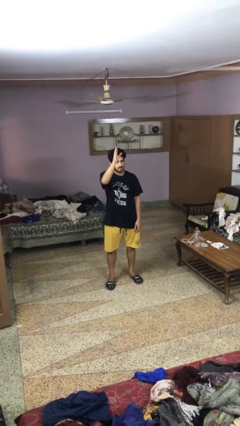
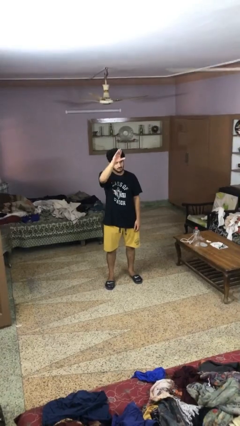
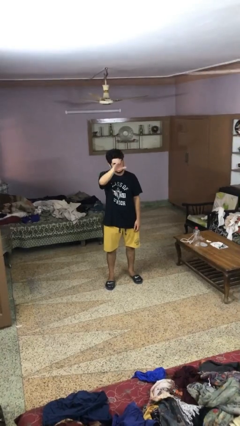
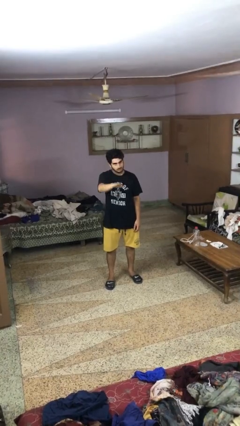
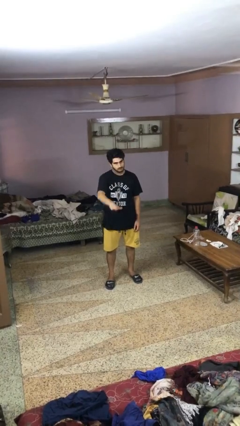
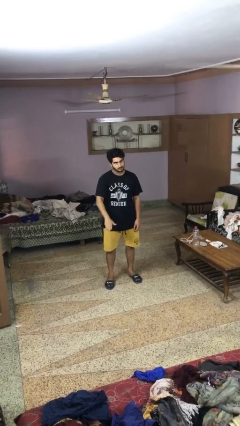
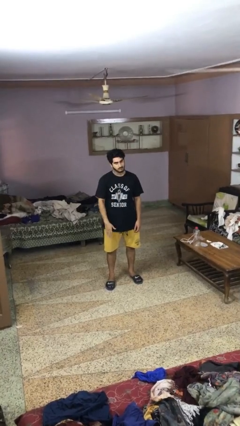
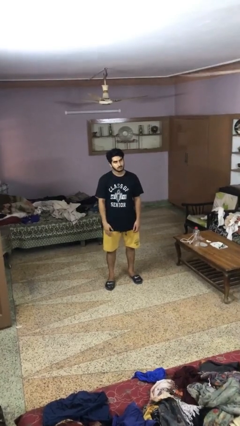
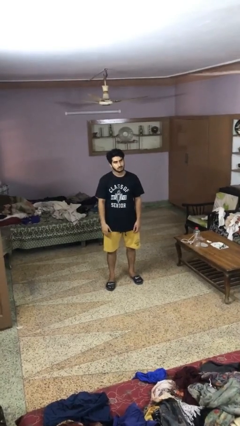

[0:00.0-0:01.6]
person gestures swipe down

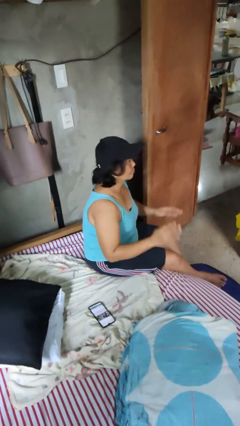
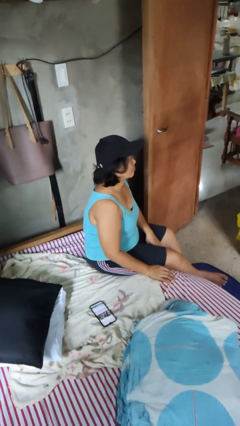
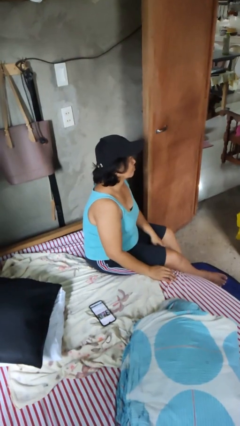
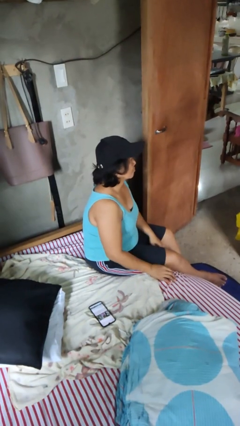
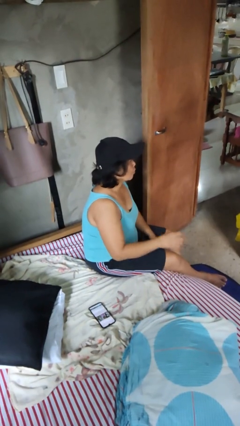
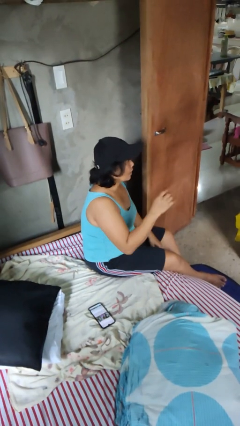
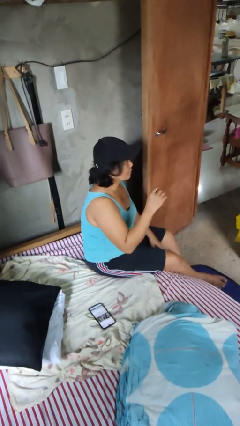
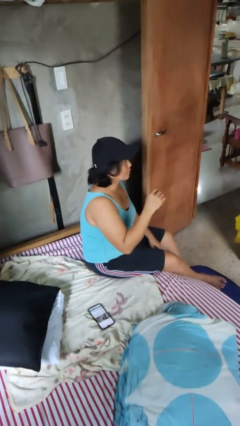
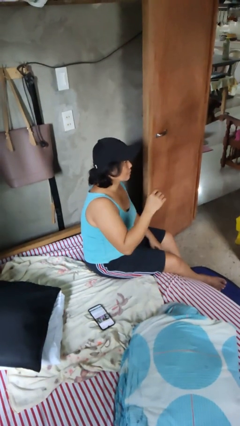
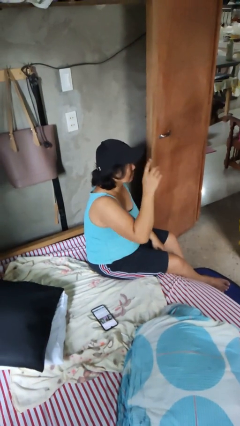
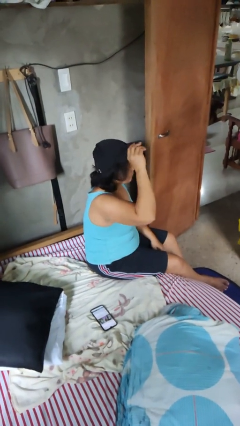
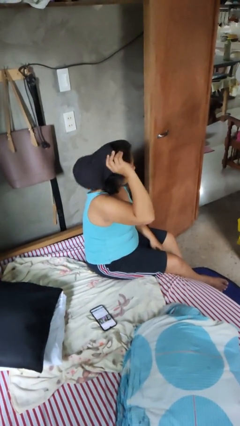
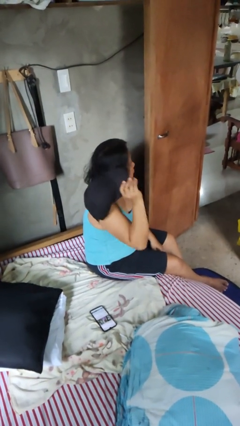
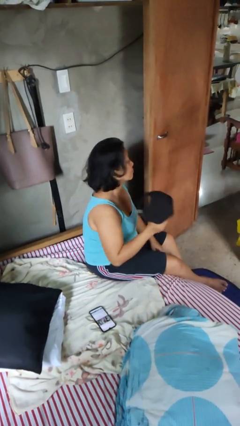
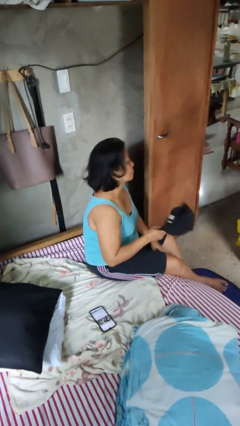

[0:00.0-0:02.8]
person takes off hat

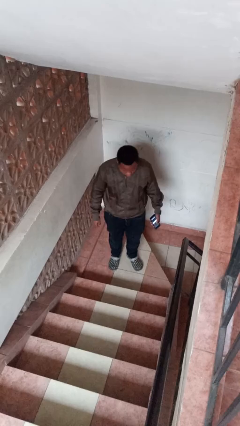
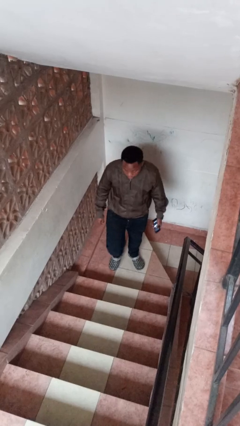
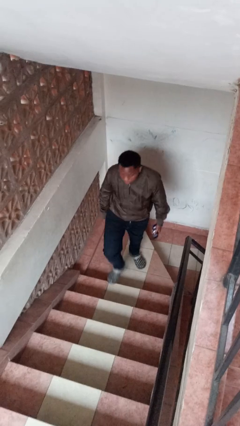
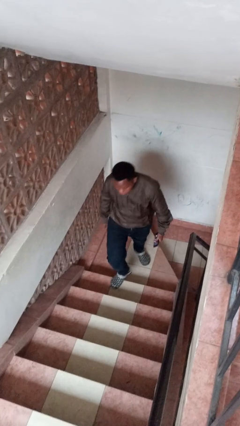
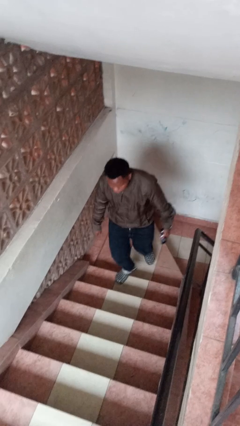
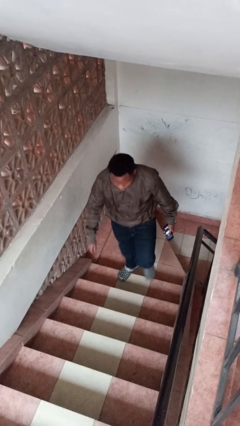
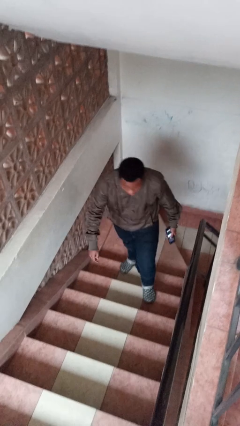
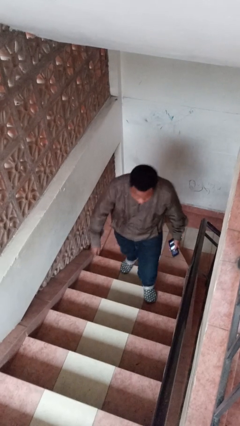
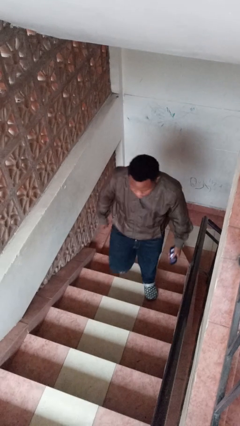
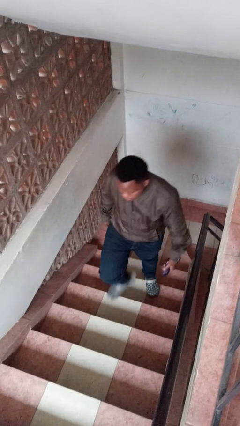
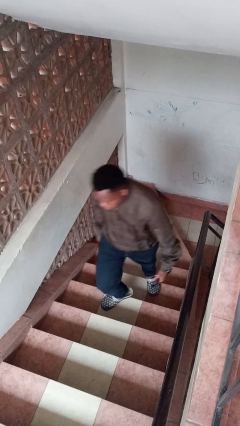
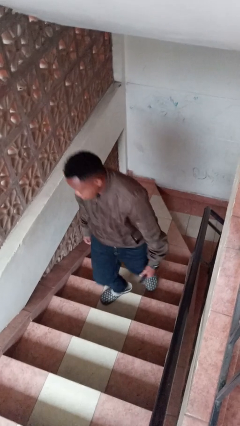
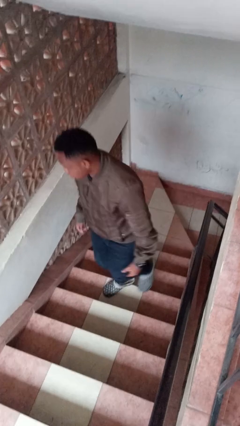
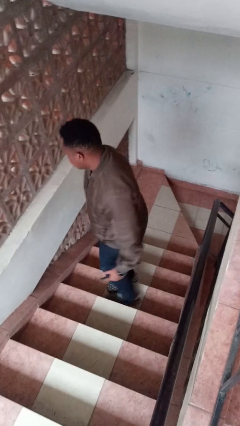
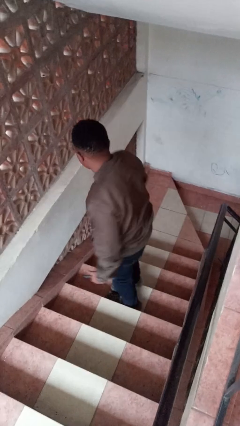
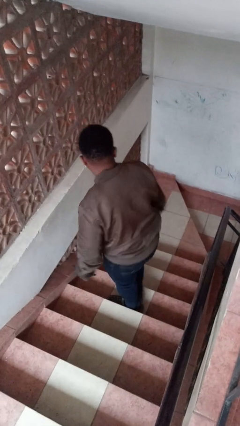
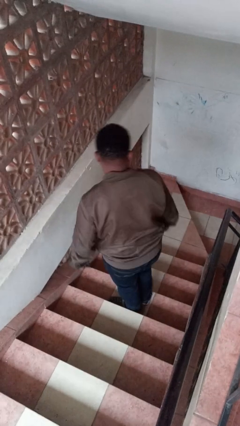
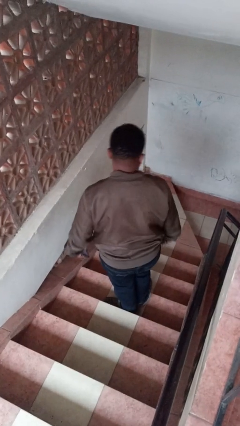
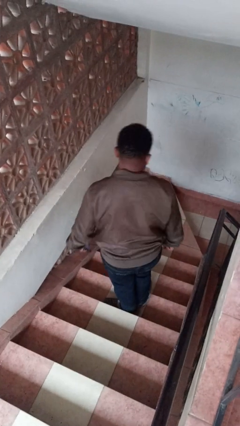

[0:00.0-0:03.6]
person climbs up stairs

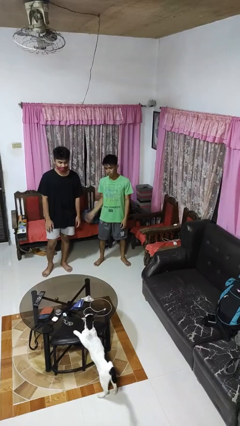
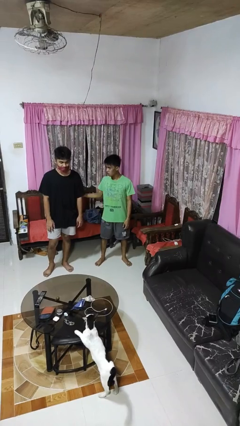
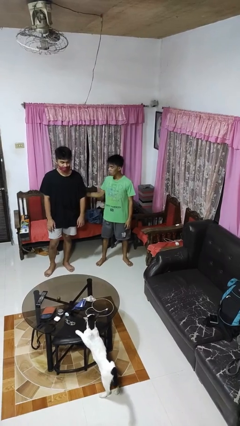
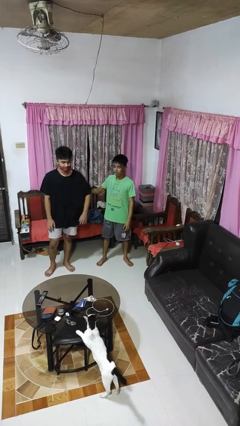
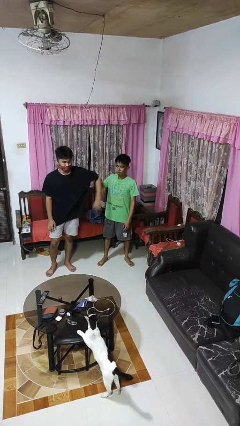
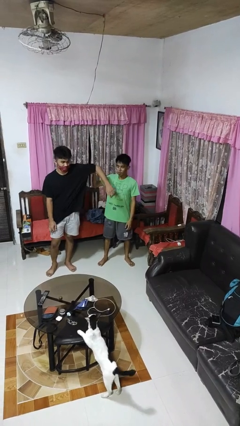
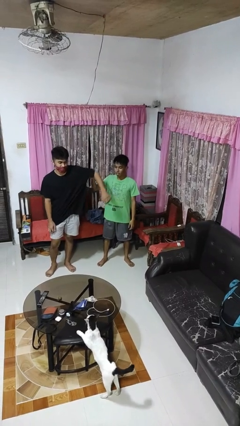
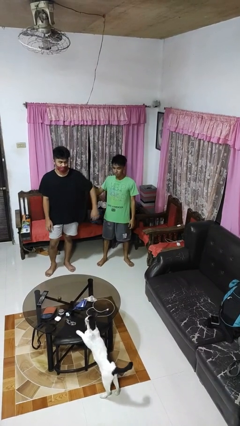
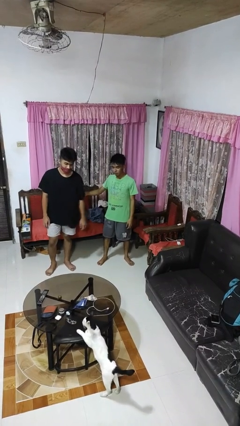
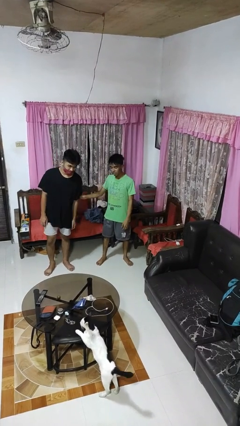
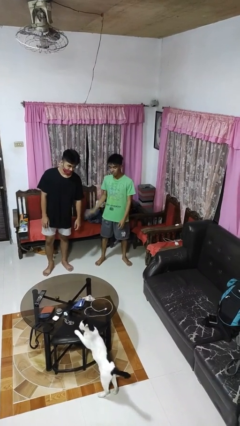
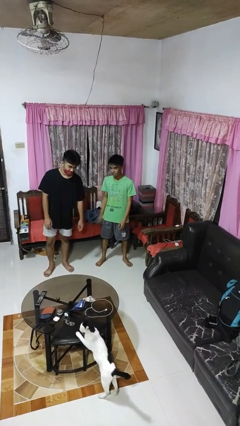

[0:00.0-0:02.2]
person grabs person by bicep

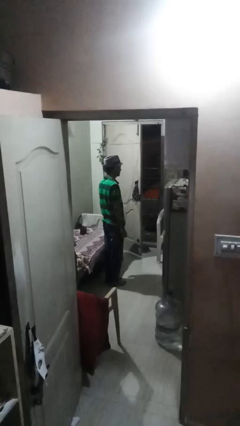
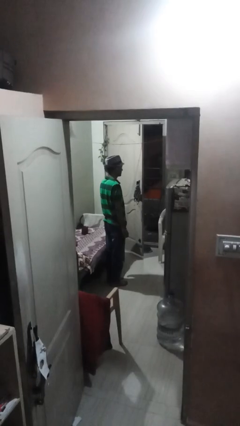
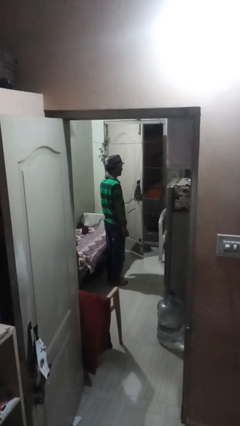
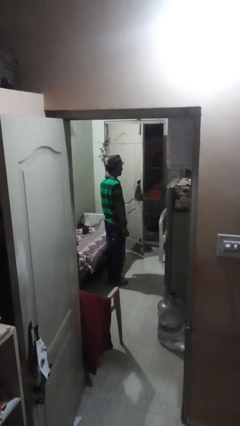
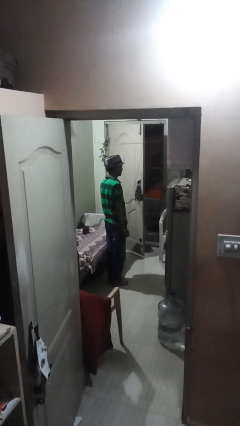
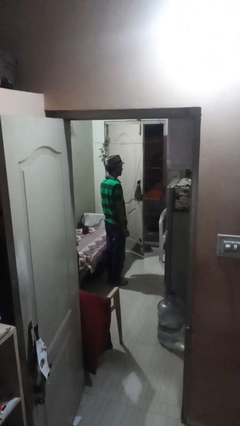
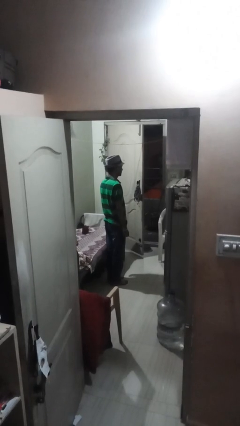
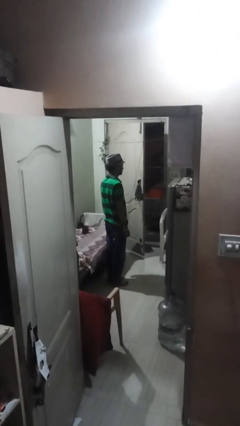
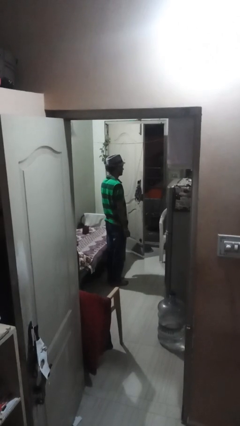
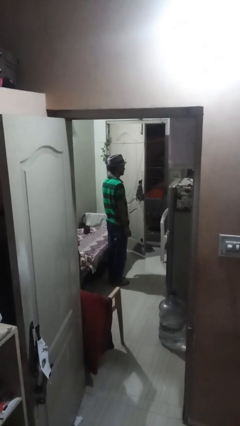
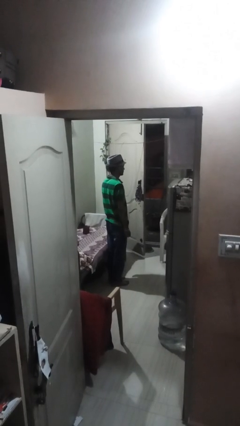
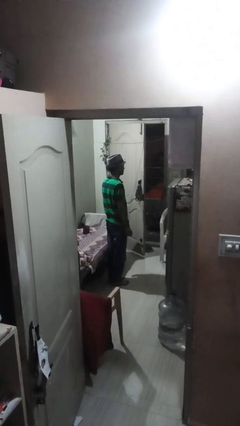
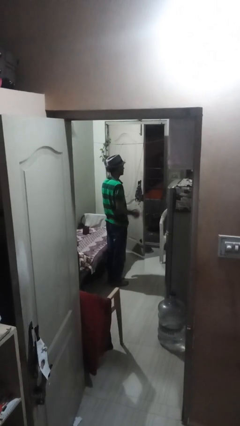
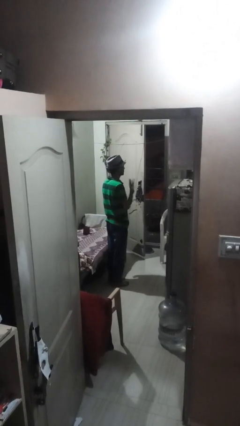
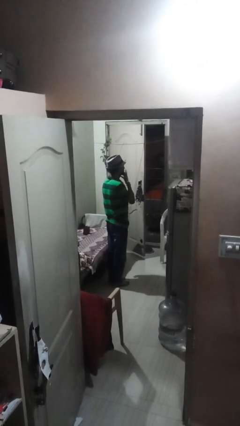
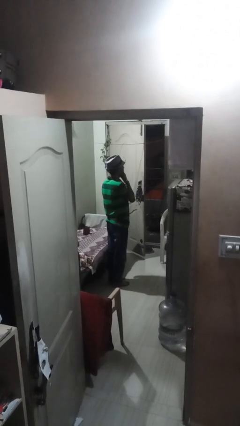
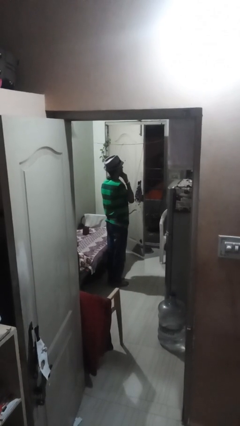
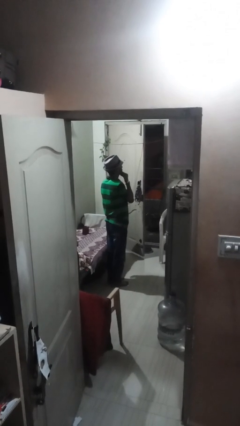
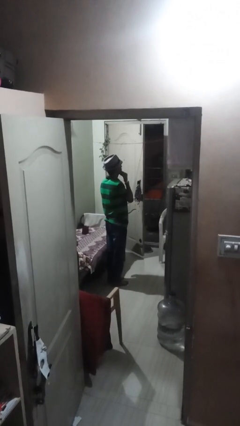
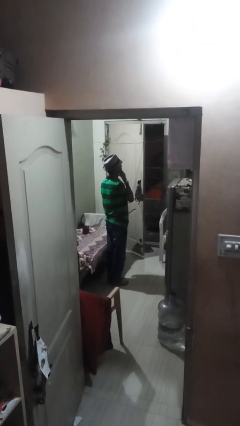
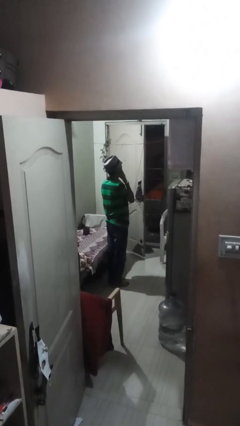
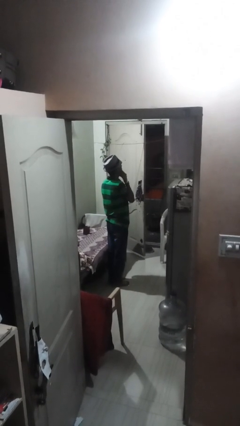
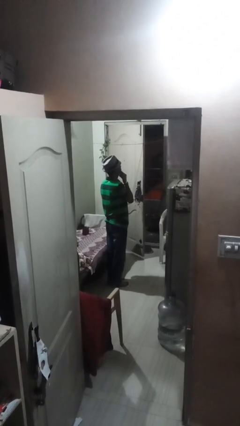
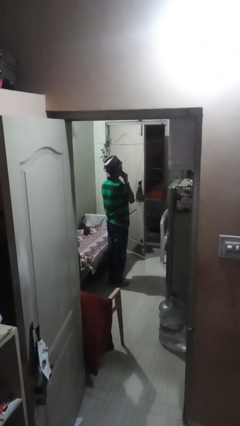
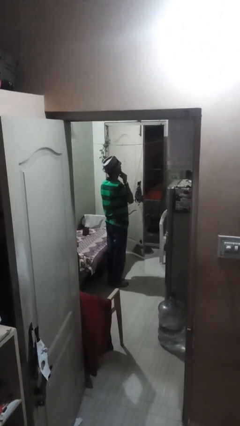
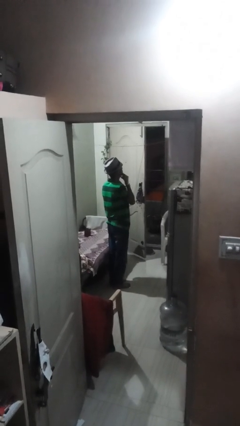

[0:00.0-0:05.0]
person strokes chin

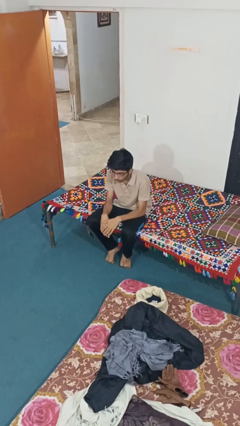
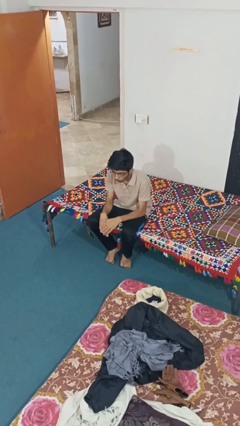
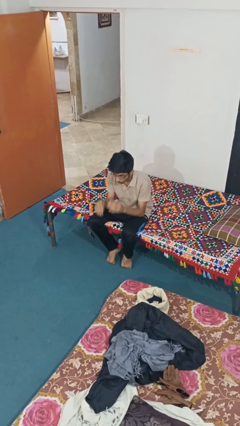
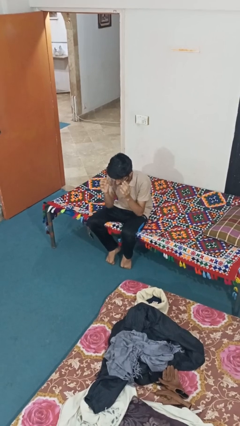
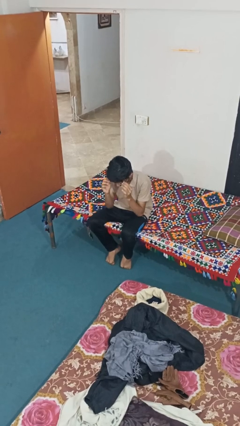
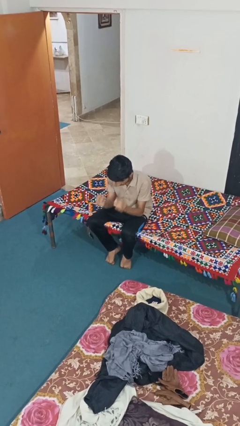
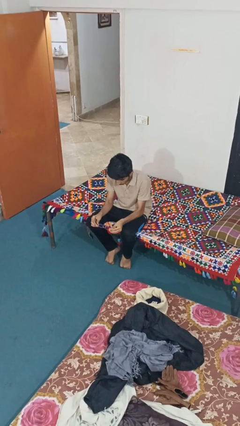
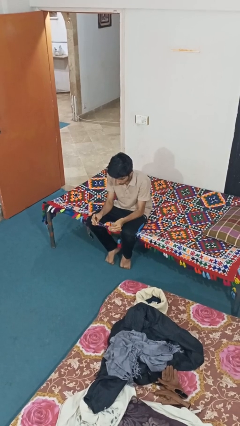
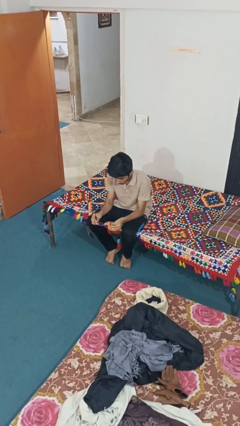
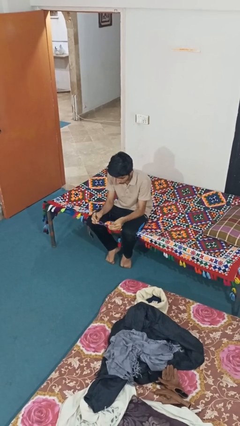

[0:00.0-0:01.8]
person takes off glasses
